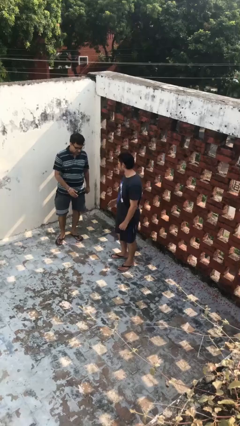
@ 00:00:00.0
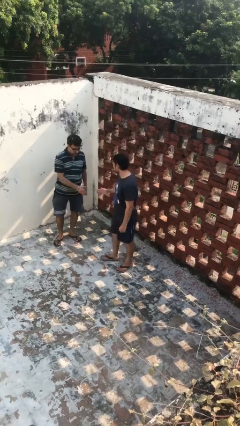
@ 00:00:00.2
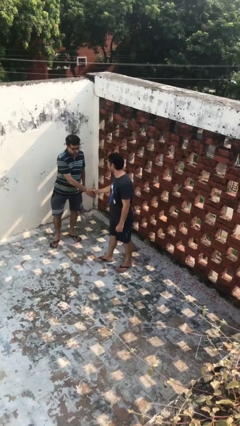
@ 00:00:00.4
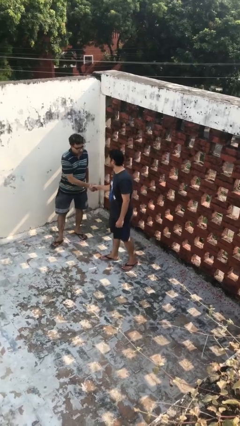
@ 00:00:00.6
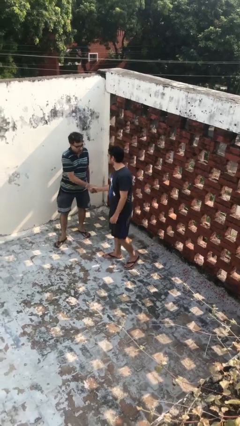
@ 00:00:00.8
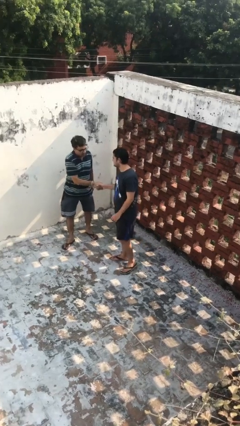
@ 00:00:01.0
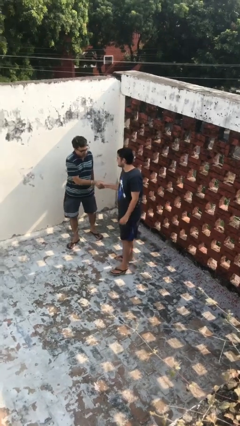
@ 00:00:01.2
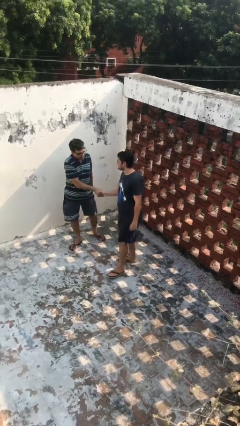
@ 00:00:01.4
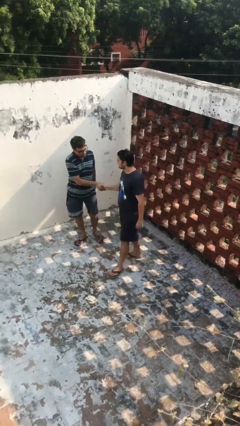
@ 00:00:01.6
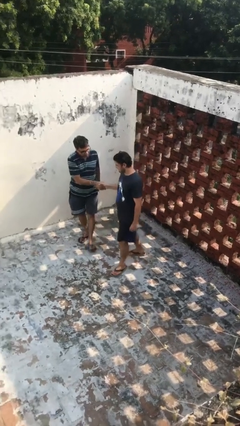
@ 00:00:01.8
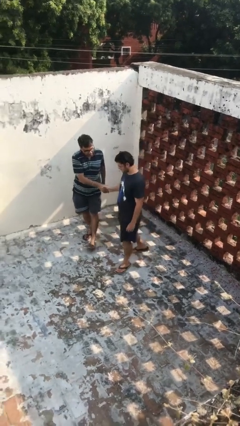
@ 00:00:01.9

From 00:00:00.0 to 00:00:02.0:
person shakes hand

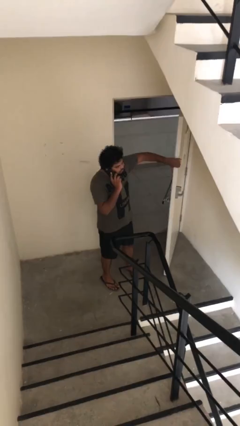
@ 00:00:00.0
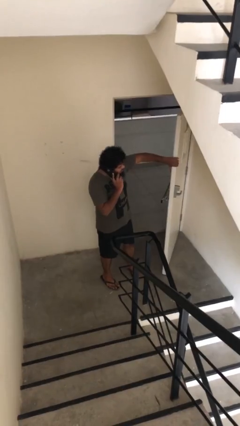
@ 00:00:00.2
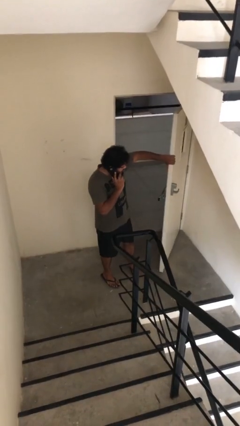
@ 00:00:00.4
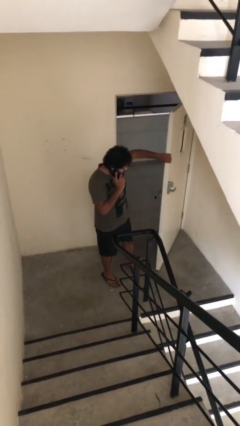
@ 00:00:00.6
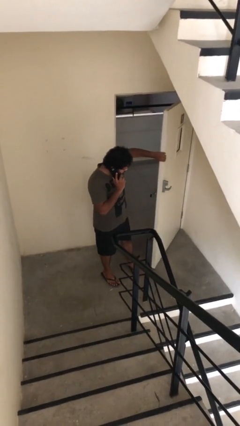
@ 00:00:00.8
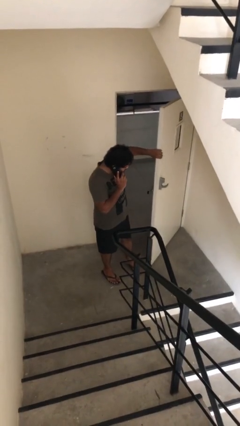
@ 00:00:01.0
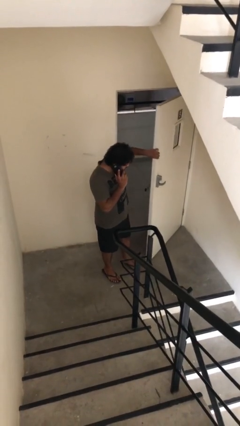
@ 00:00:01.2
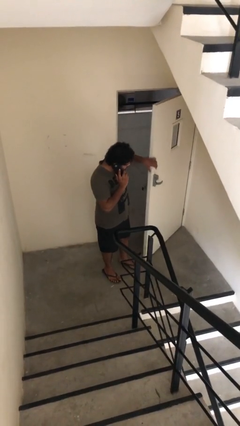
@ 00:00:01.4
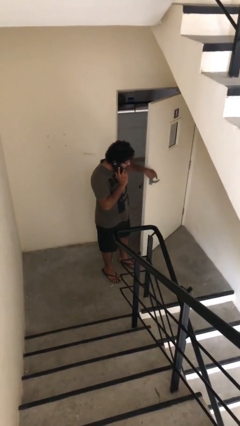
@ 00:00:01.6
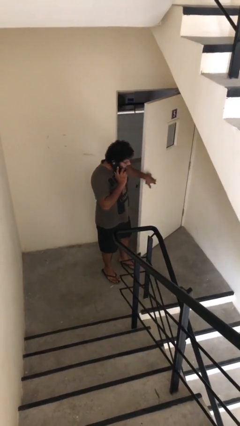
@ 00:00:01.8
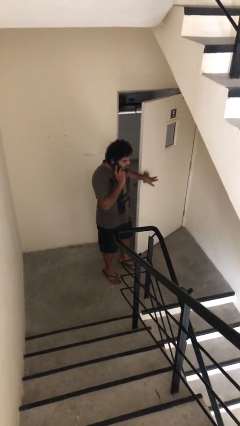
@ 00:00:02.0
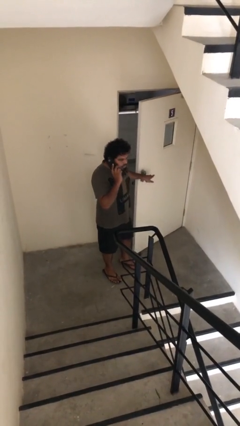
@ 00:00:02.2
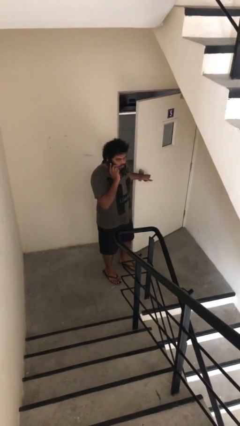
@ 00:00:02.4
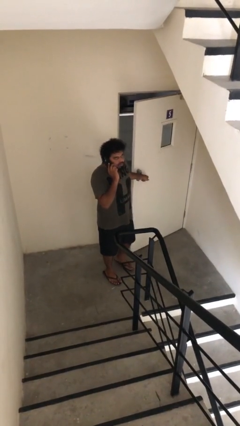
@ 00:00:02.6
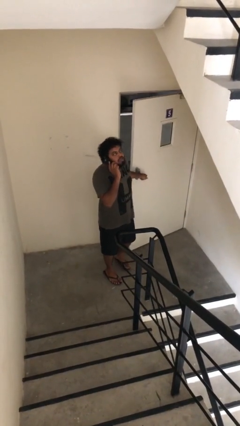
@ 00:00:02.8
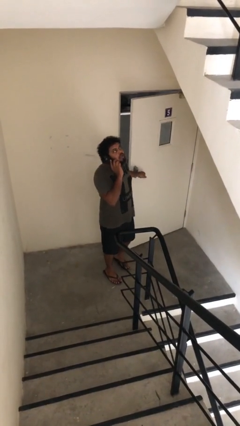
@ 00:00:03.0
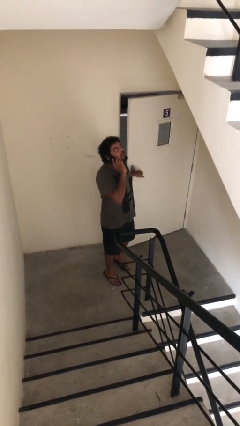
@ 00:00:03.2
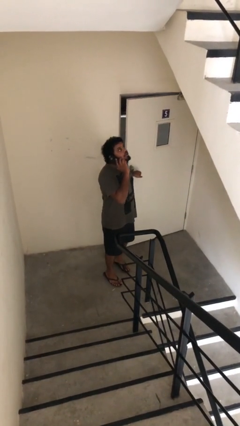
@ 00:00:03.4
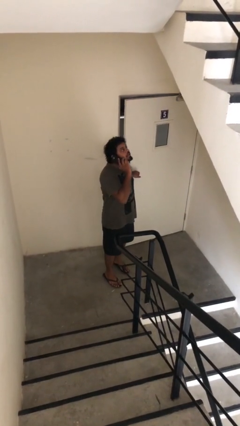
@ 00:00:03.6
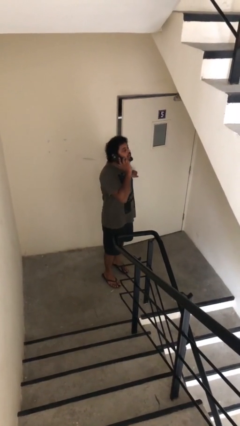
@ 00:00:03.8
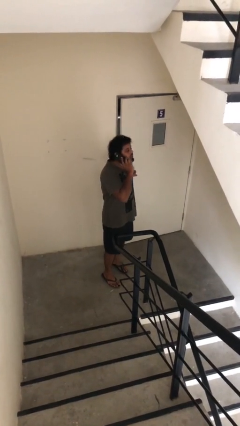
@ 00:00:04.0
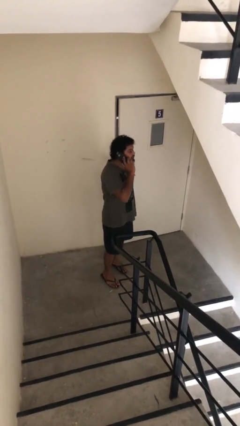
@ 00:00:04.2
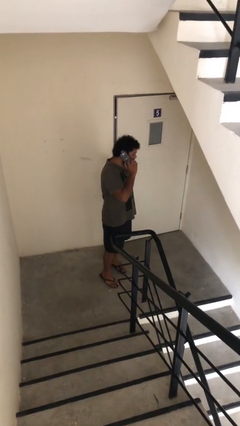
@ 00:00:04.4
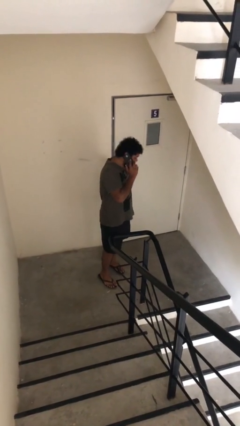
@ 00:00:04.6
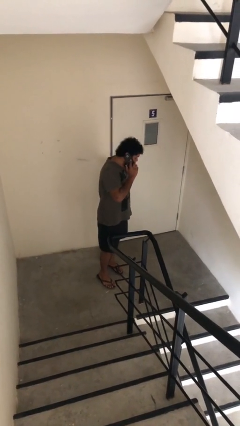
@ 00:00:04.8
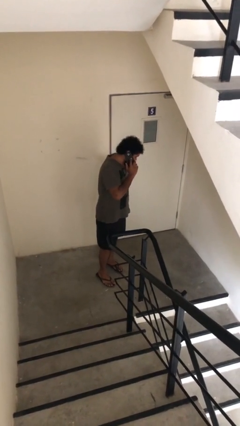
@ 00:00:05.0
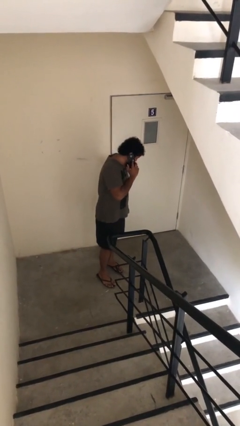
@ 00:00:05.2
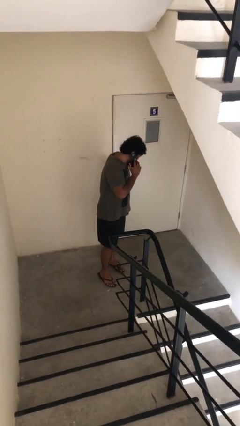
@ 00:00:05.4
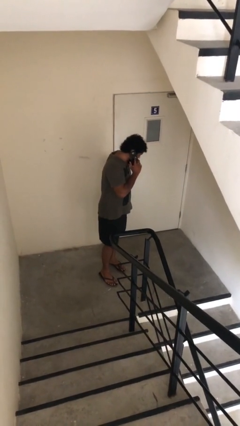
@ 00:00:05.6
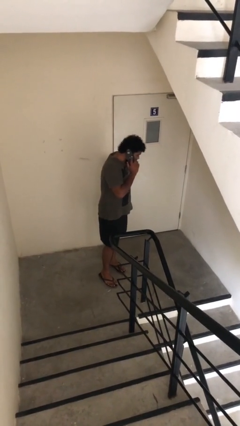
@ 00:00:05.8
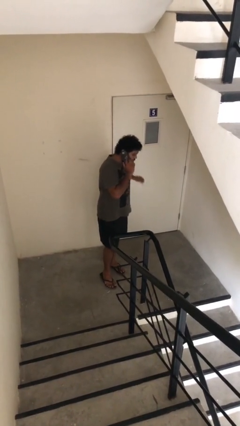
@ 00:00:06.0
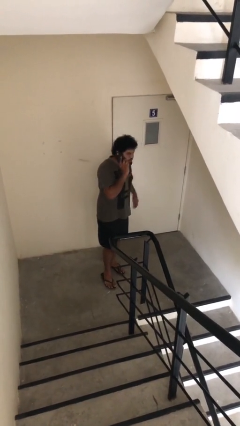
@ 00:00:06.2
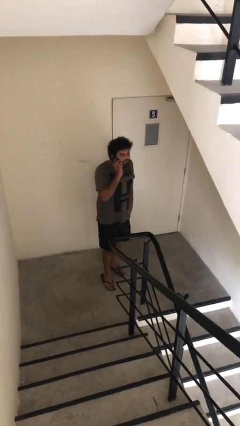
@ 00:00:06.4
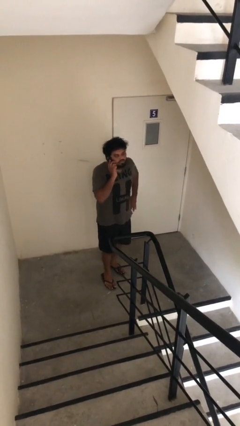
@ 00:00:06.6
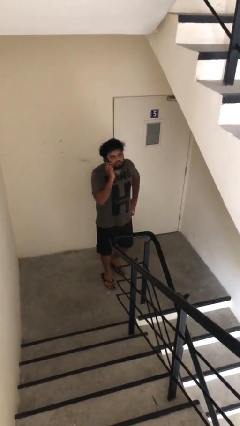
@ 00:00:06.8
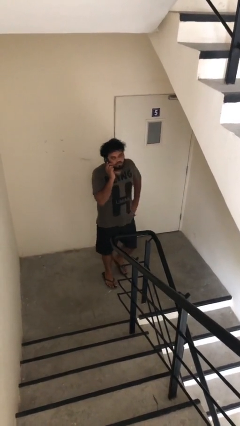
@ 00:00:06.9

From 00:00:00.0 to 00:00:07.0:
person closes facility door

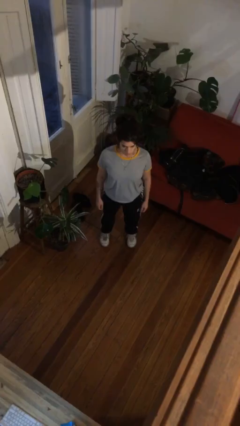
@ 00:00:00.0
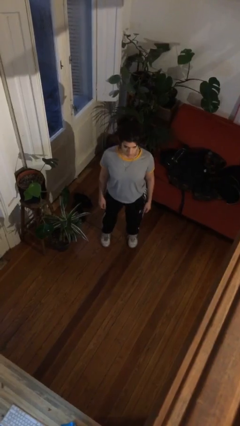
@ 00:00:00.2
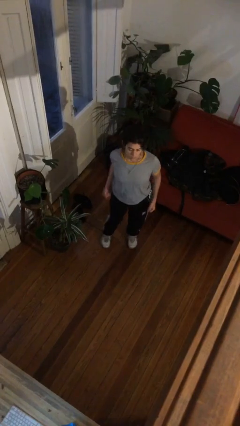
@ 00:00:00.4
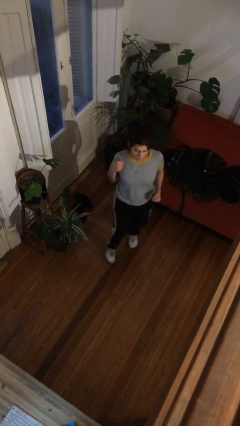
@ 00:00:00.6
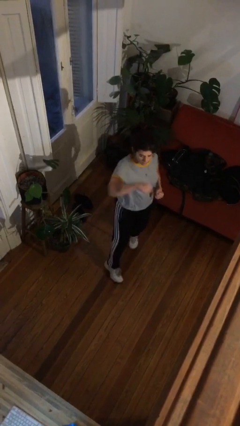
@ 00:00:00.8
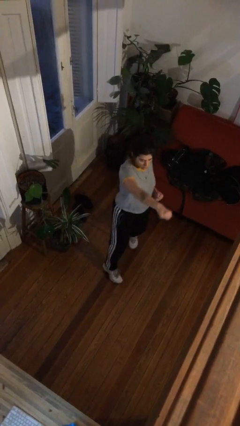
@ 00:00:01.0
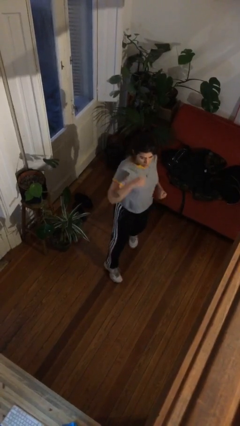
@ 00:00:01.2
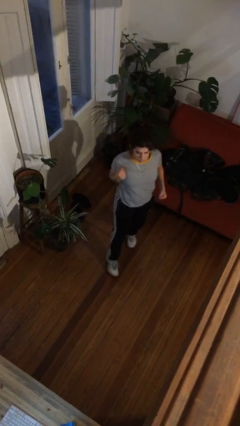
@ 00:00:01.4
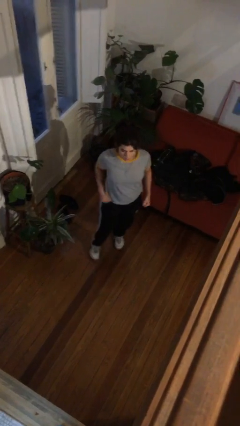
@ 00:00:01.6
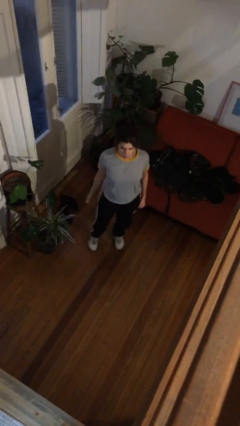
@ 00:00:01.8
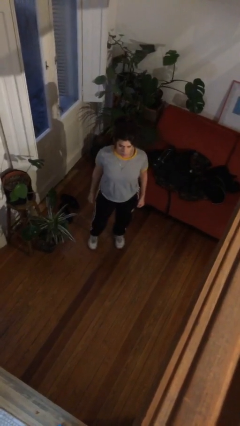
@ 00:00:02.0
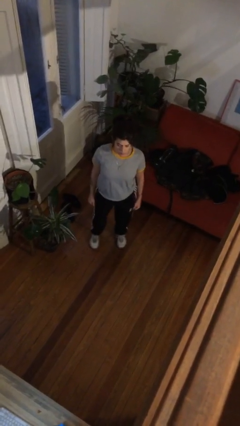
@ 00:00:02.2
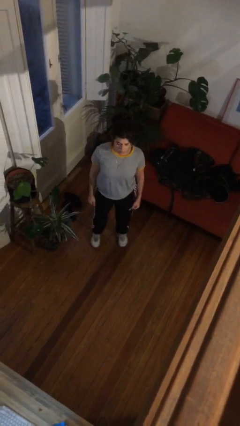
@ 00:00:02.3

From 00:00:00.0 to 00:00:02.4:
person punches

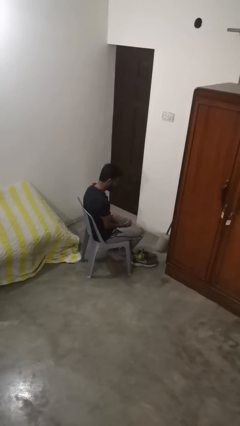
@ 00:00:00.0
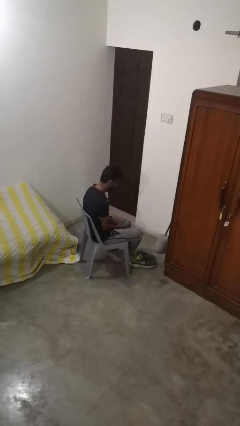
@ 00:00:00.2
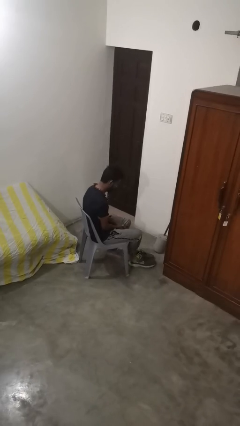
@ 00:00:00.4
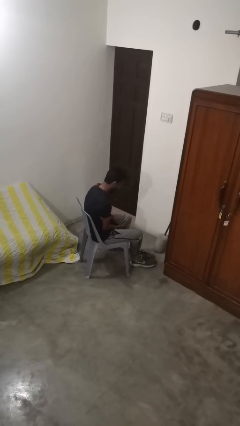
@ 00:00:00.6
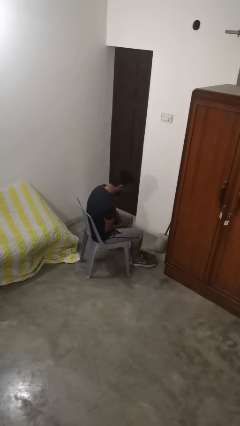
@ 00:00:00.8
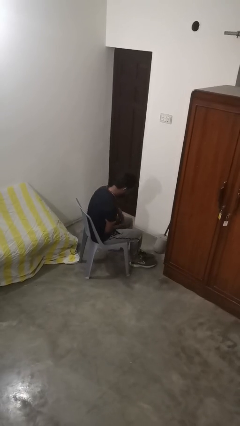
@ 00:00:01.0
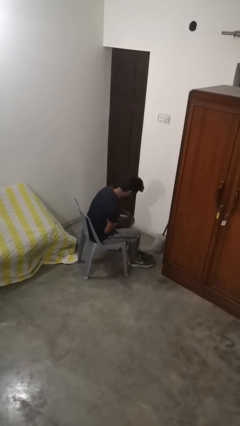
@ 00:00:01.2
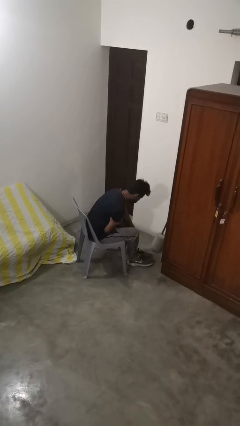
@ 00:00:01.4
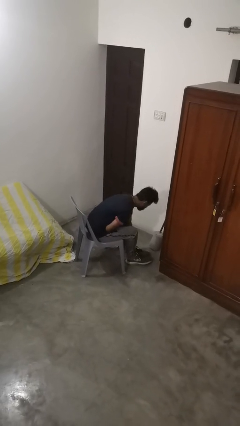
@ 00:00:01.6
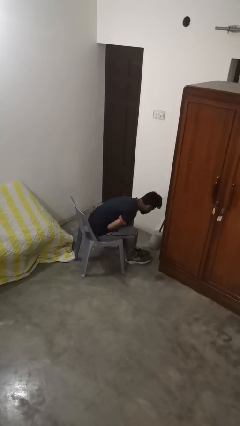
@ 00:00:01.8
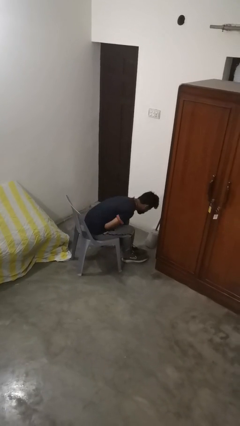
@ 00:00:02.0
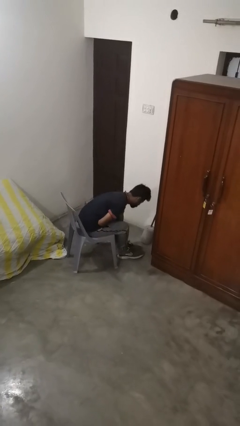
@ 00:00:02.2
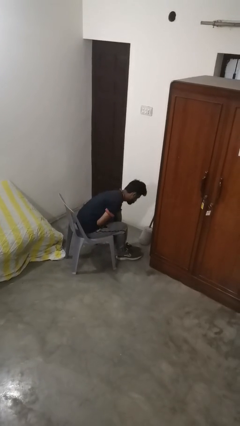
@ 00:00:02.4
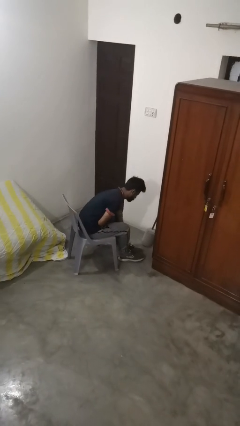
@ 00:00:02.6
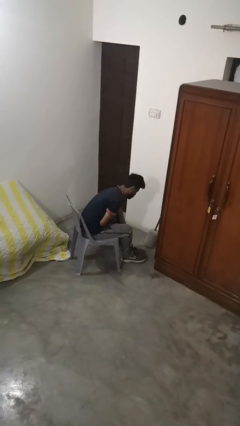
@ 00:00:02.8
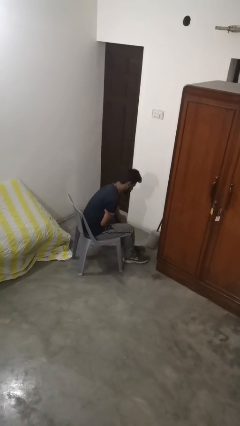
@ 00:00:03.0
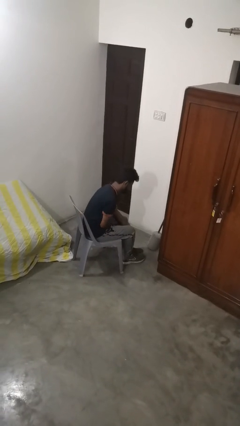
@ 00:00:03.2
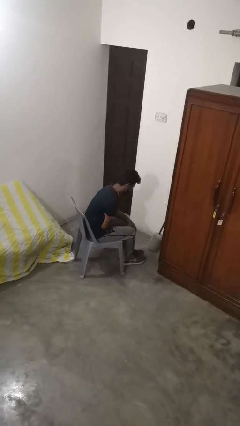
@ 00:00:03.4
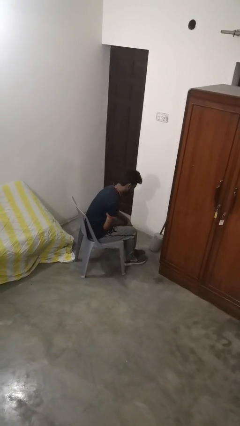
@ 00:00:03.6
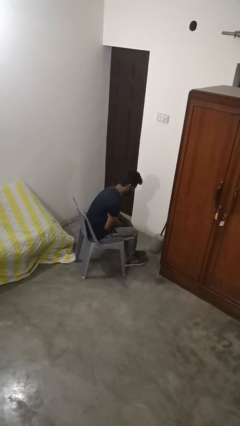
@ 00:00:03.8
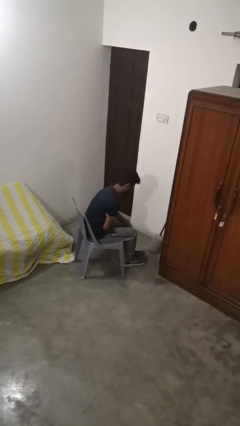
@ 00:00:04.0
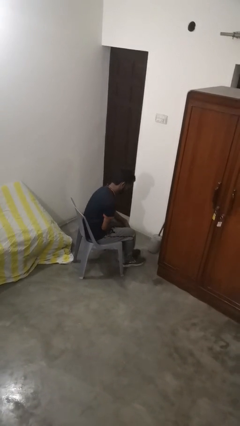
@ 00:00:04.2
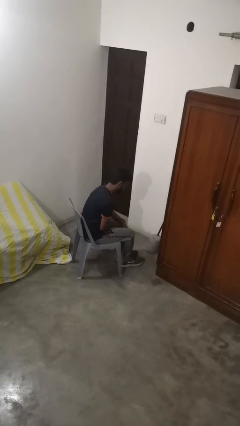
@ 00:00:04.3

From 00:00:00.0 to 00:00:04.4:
person puts on shoes

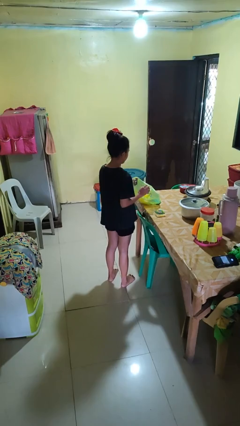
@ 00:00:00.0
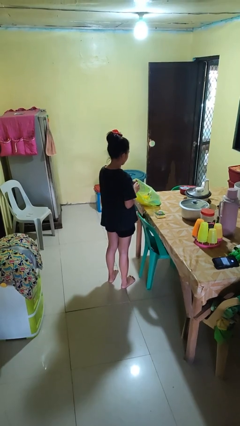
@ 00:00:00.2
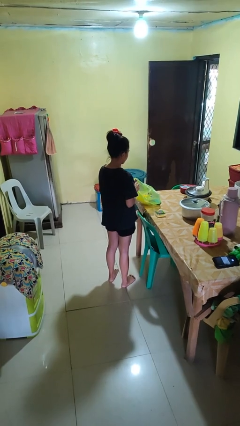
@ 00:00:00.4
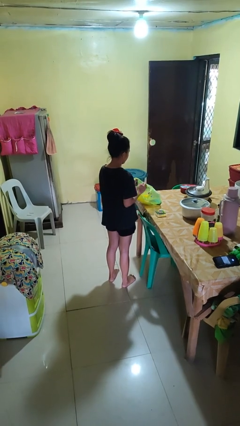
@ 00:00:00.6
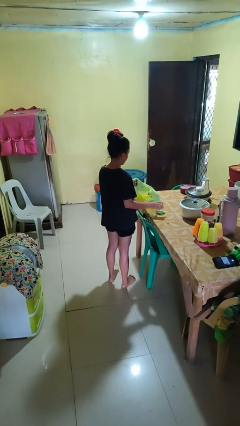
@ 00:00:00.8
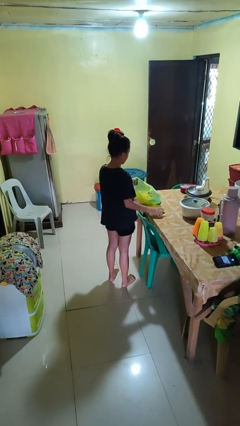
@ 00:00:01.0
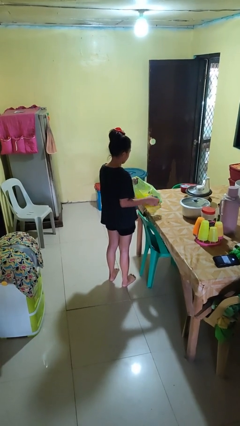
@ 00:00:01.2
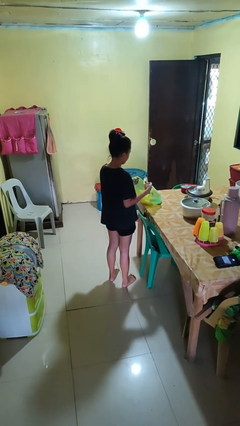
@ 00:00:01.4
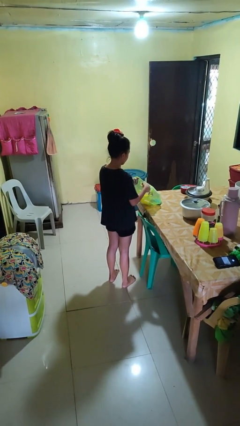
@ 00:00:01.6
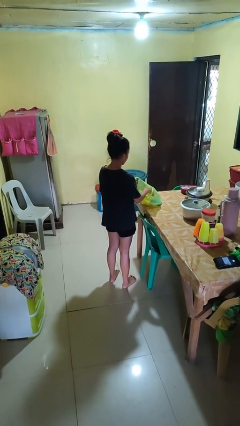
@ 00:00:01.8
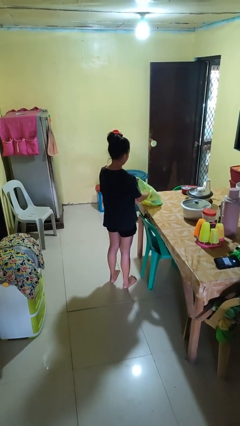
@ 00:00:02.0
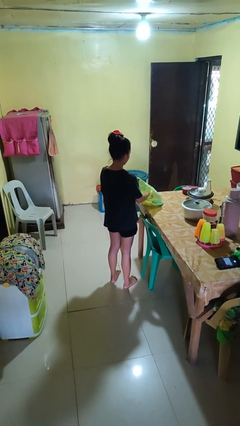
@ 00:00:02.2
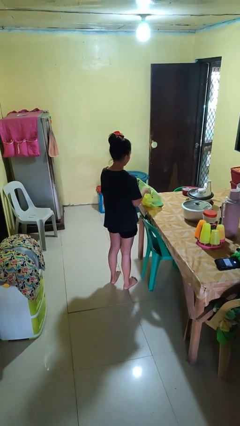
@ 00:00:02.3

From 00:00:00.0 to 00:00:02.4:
person puts object into bag
